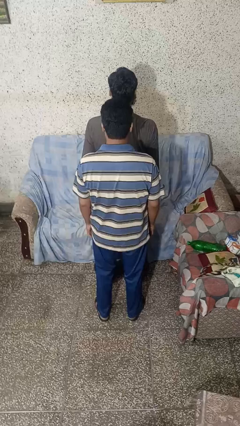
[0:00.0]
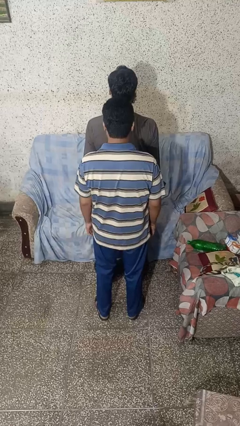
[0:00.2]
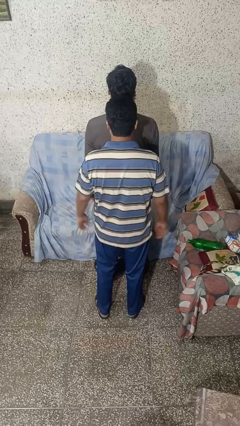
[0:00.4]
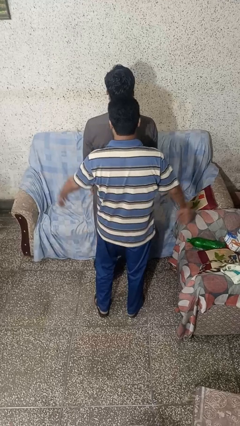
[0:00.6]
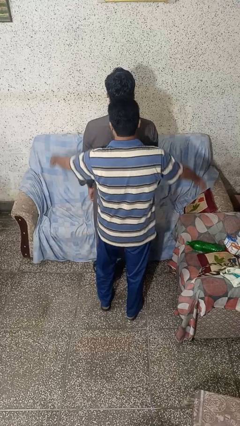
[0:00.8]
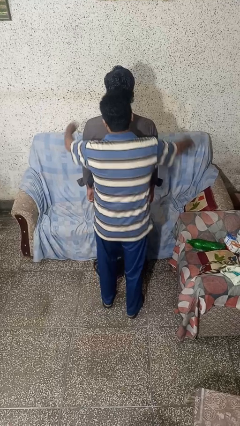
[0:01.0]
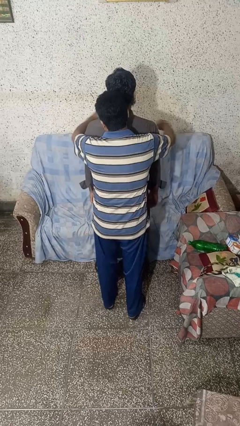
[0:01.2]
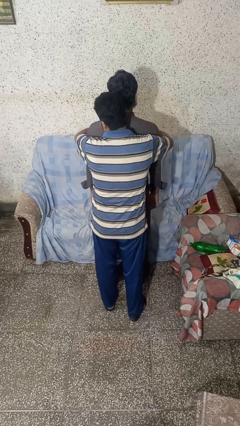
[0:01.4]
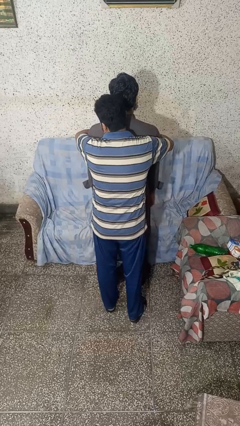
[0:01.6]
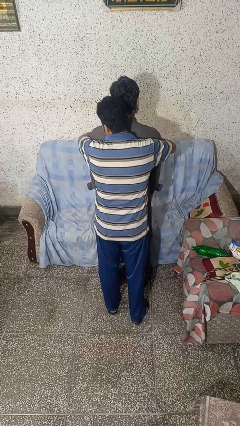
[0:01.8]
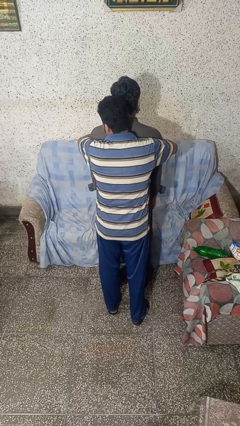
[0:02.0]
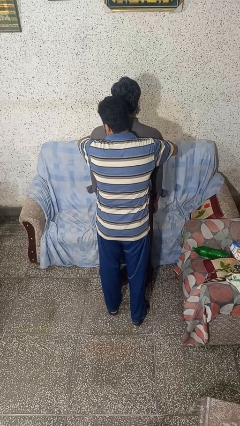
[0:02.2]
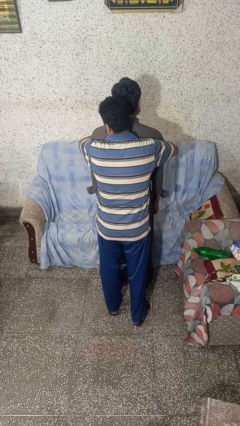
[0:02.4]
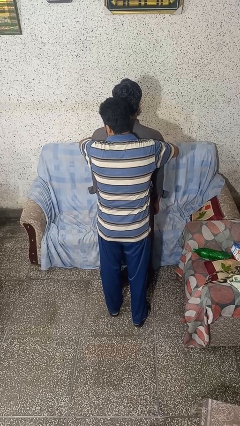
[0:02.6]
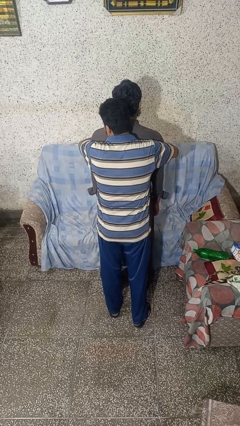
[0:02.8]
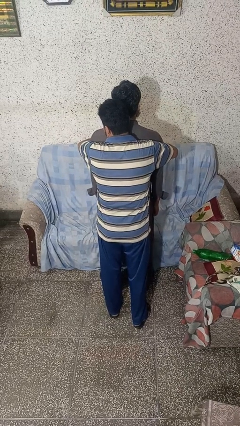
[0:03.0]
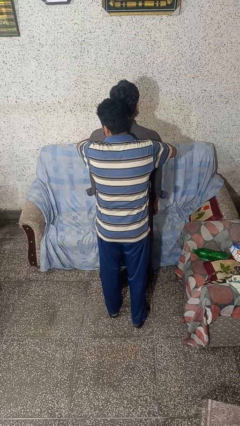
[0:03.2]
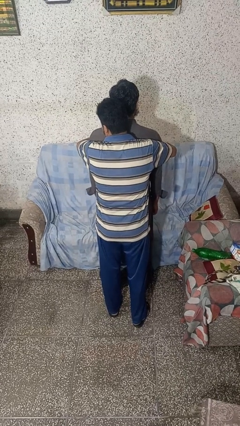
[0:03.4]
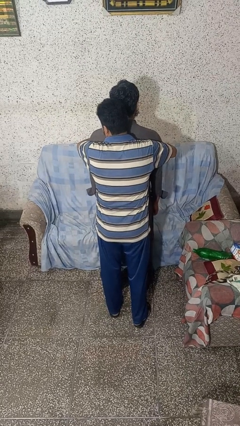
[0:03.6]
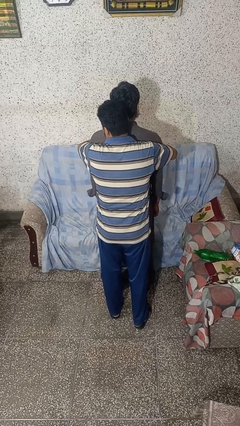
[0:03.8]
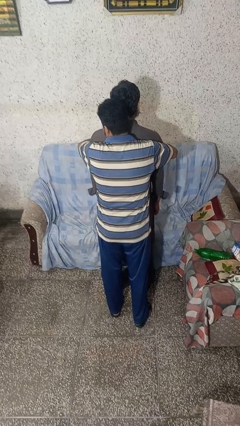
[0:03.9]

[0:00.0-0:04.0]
person hugs person from behind

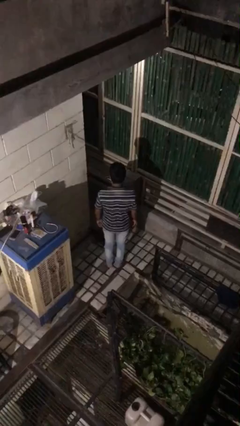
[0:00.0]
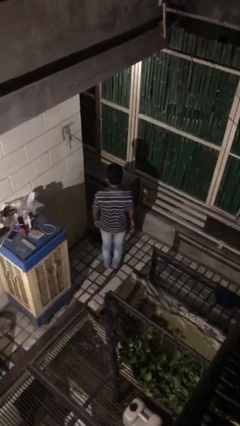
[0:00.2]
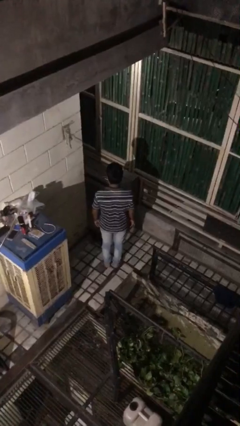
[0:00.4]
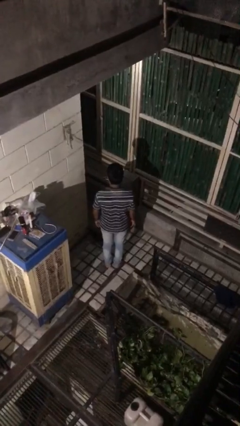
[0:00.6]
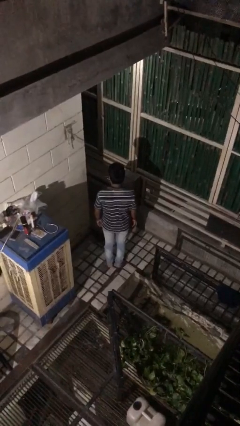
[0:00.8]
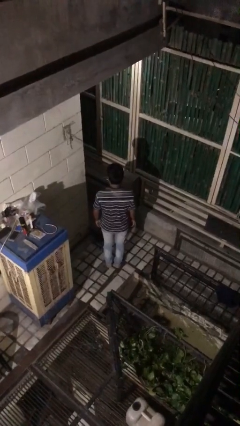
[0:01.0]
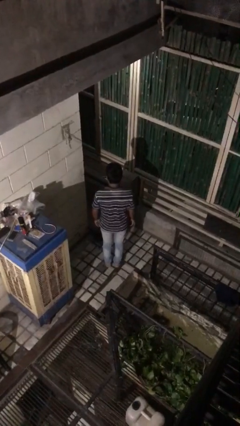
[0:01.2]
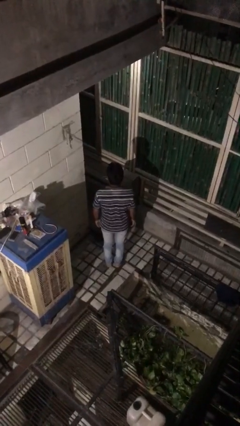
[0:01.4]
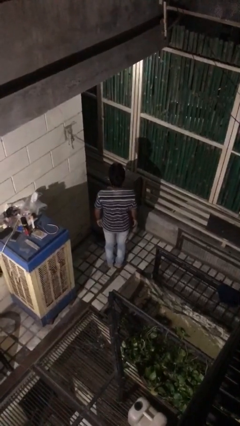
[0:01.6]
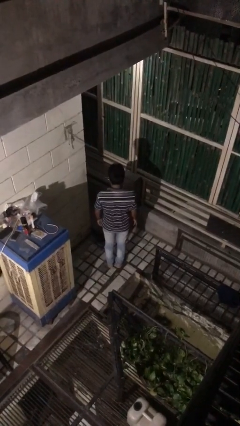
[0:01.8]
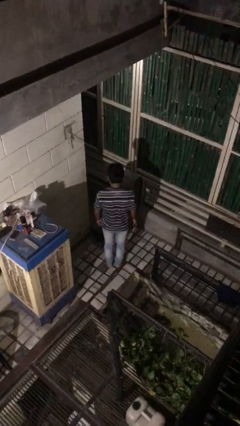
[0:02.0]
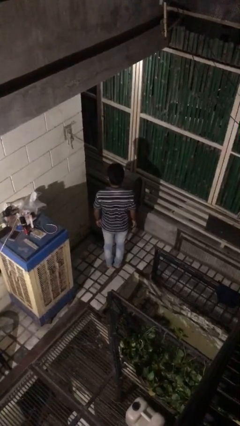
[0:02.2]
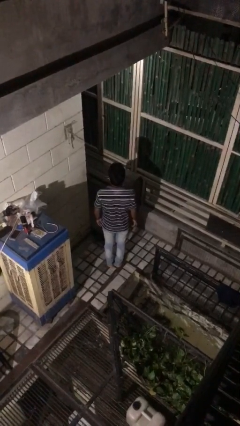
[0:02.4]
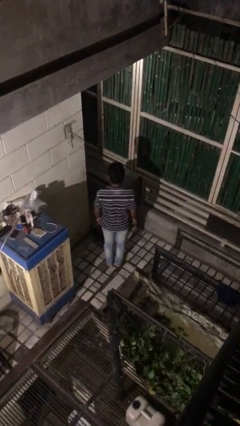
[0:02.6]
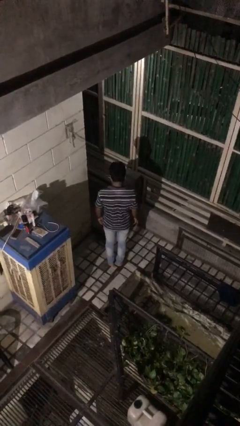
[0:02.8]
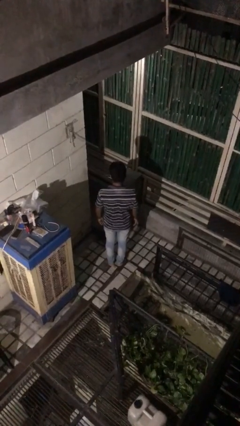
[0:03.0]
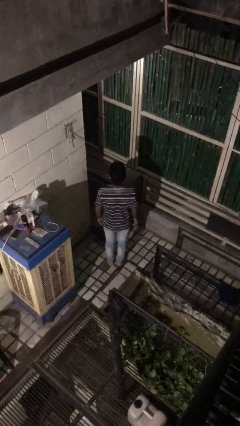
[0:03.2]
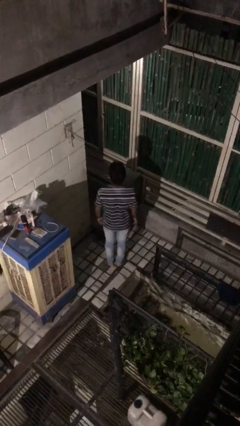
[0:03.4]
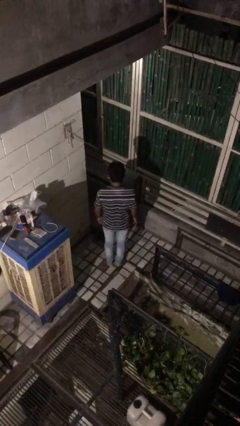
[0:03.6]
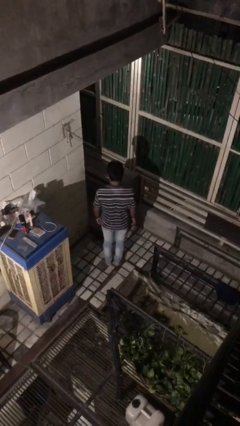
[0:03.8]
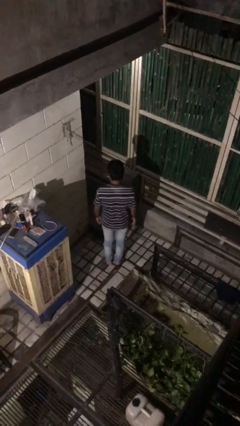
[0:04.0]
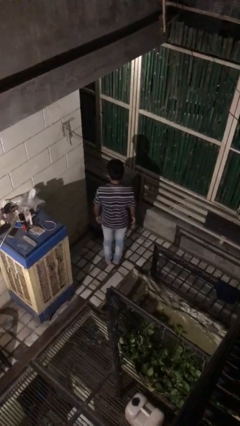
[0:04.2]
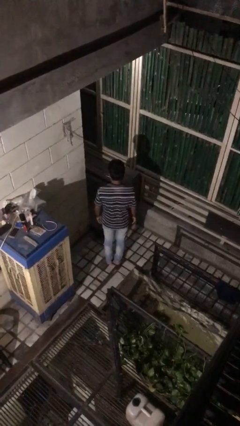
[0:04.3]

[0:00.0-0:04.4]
person nods head

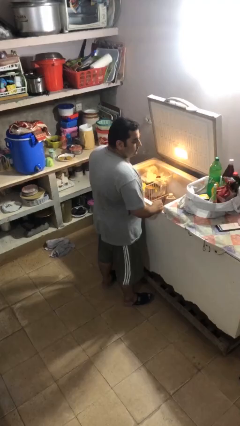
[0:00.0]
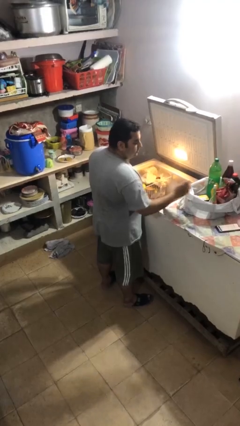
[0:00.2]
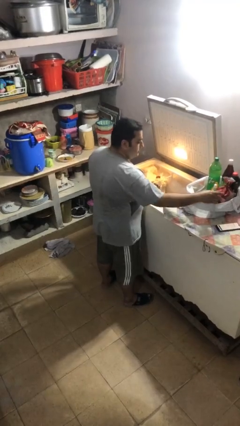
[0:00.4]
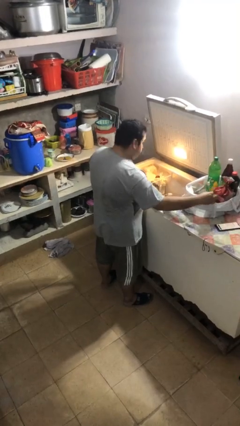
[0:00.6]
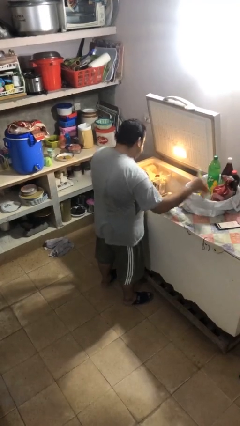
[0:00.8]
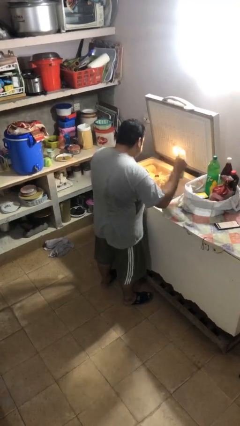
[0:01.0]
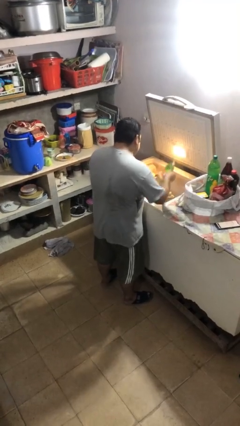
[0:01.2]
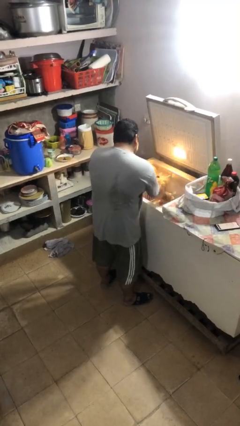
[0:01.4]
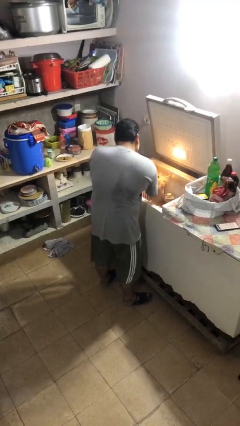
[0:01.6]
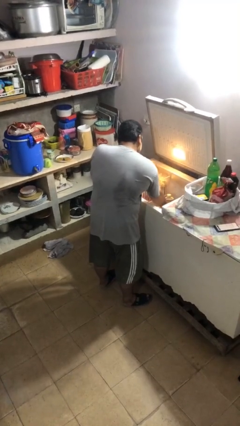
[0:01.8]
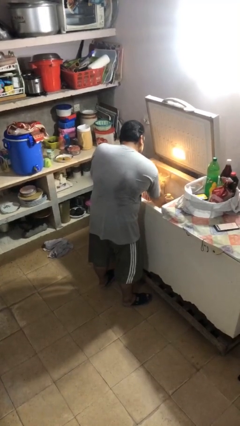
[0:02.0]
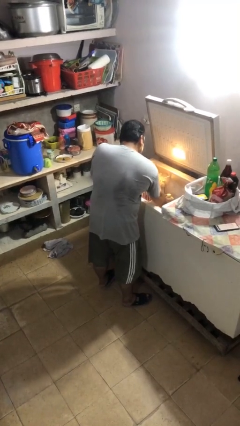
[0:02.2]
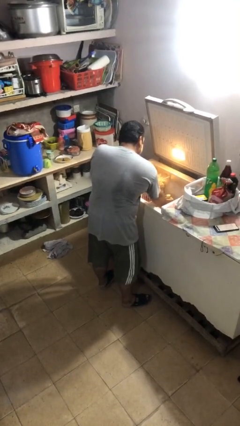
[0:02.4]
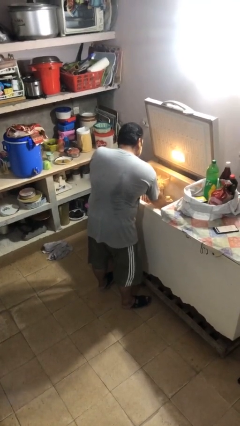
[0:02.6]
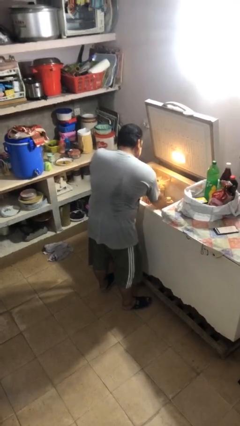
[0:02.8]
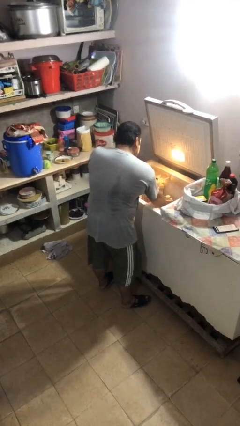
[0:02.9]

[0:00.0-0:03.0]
person loads groceries into refrigerator

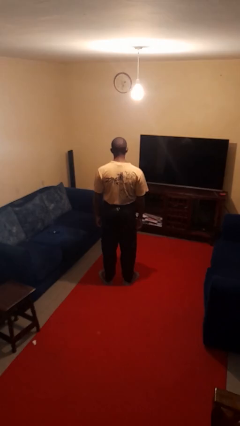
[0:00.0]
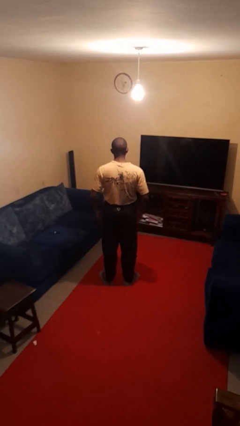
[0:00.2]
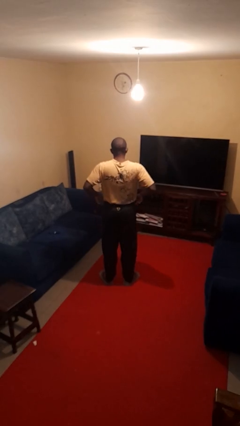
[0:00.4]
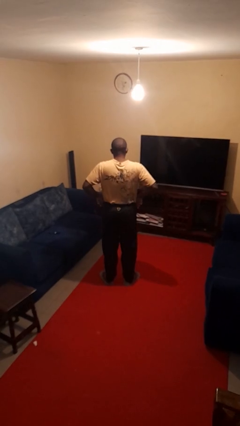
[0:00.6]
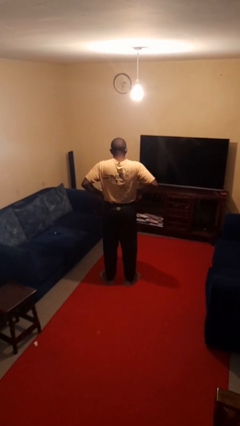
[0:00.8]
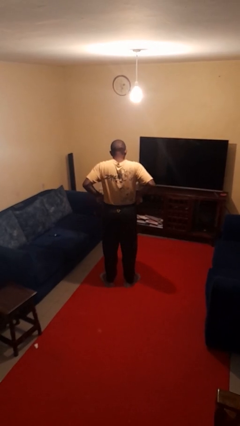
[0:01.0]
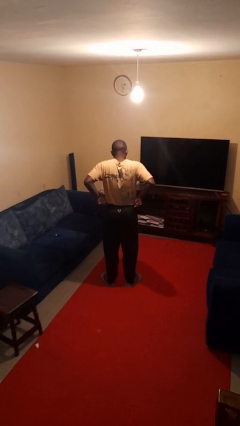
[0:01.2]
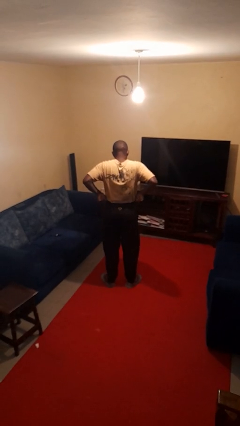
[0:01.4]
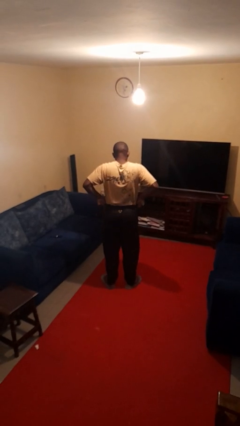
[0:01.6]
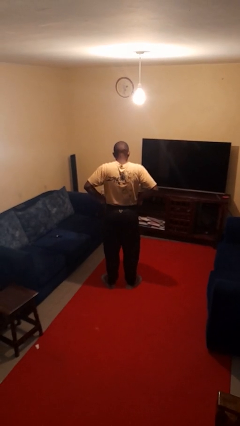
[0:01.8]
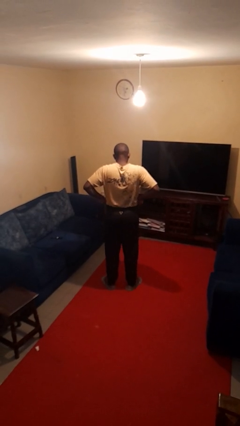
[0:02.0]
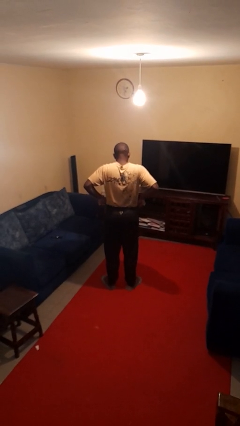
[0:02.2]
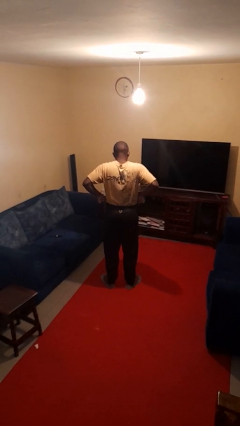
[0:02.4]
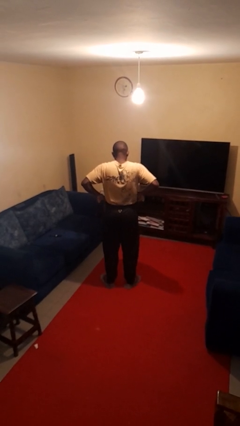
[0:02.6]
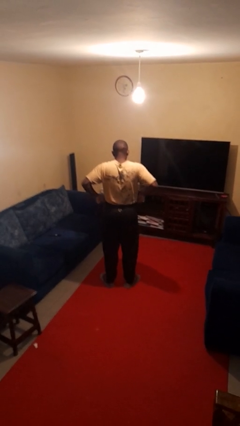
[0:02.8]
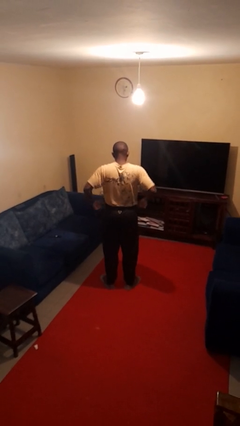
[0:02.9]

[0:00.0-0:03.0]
person hikes up pants

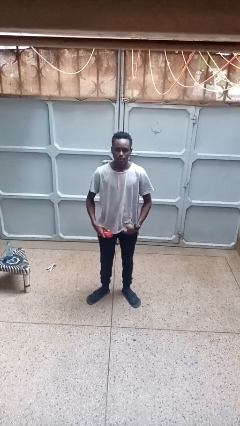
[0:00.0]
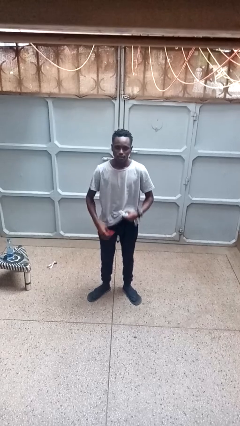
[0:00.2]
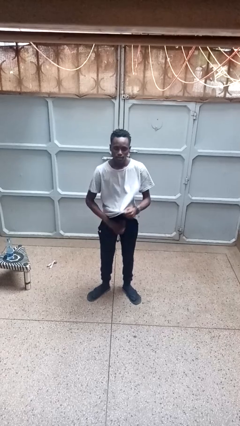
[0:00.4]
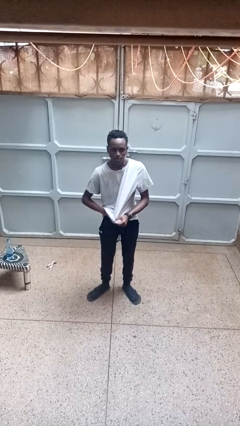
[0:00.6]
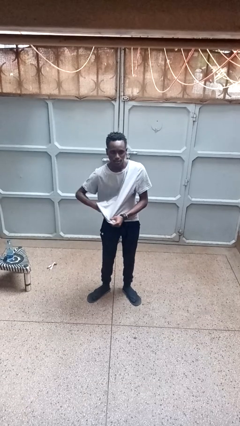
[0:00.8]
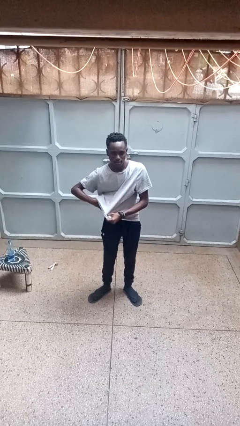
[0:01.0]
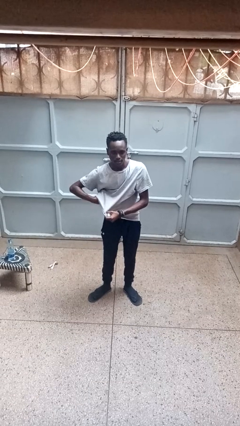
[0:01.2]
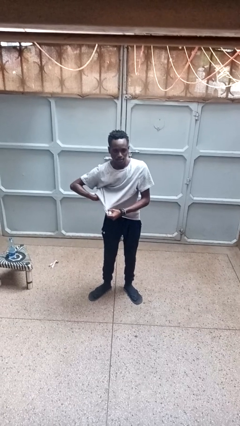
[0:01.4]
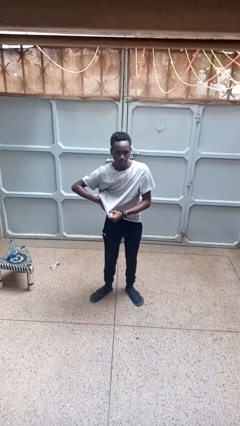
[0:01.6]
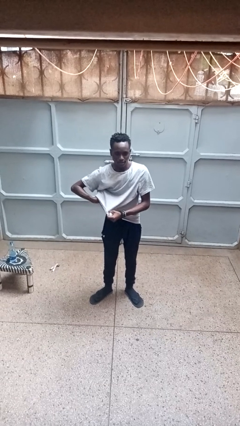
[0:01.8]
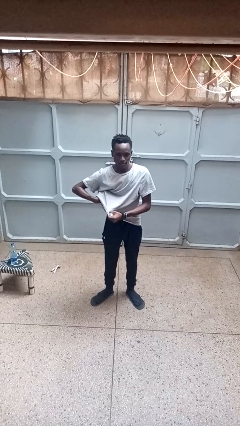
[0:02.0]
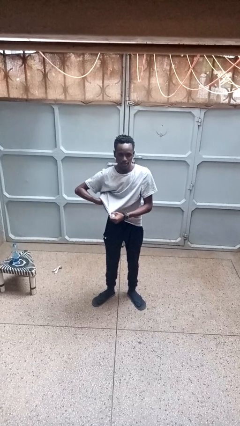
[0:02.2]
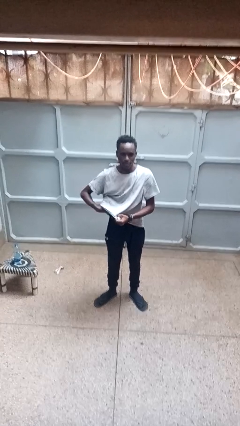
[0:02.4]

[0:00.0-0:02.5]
person applies deodorant

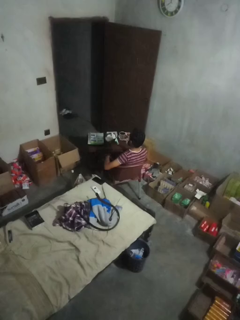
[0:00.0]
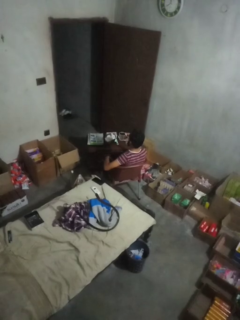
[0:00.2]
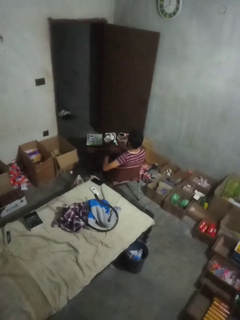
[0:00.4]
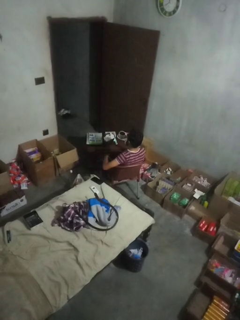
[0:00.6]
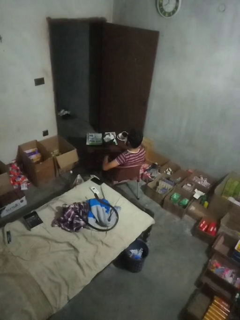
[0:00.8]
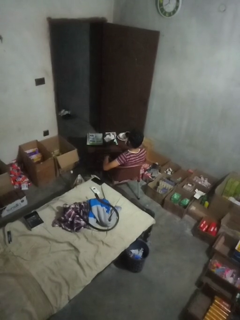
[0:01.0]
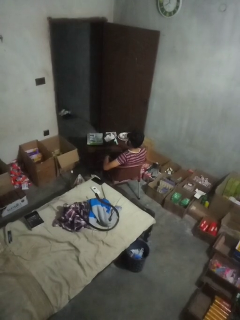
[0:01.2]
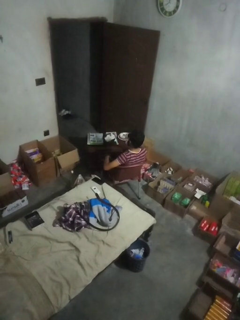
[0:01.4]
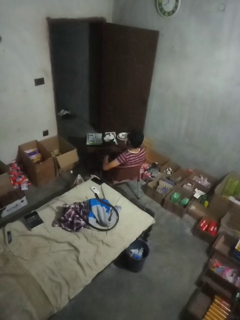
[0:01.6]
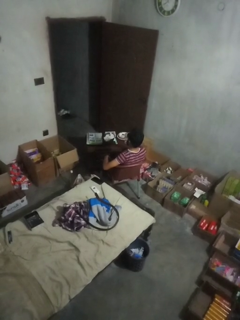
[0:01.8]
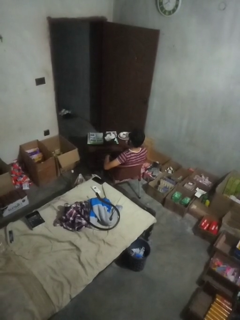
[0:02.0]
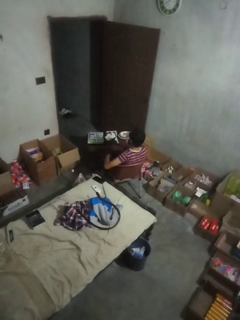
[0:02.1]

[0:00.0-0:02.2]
person drinks from mug
